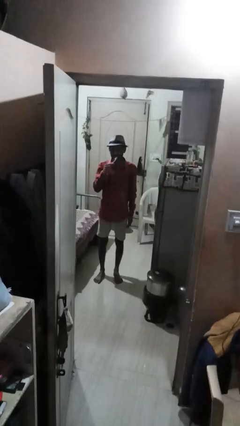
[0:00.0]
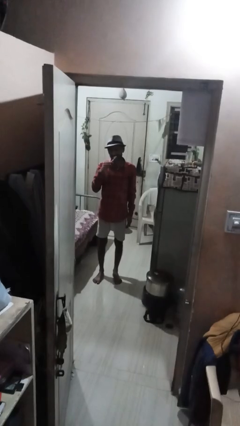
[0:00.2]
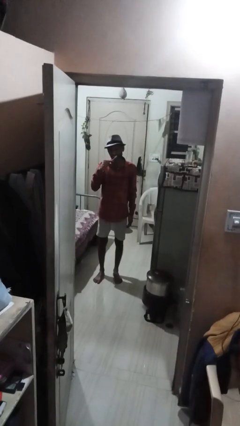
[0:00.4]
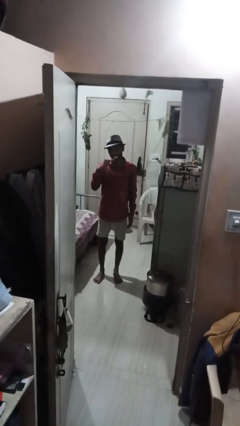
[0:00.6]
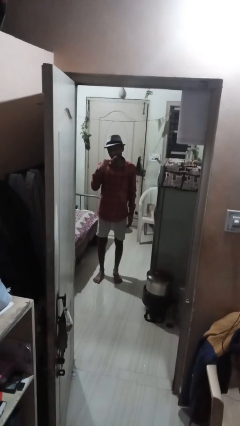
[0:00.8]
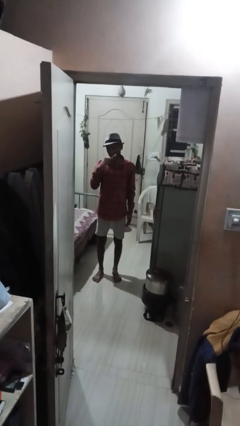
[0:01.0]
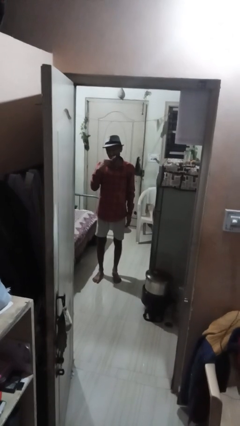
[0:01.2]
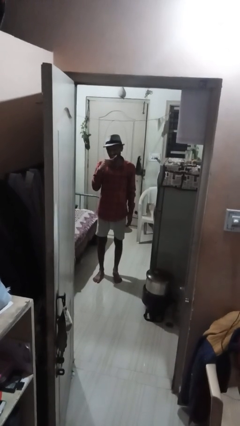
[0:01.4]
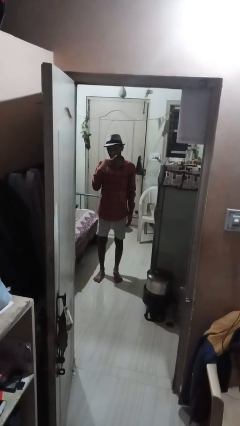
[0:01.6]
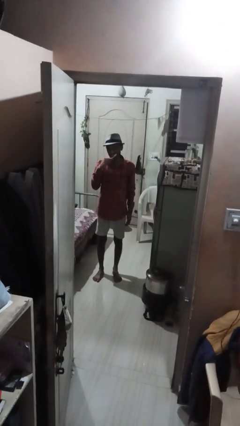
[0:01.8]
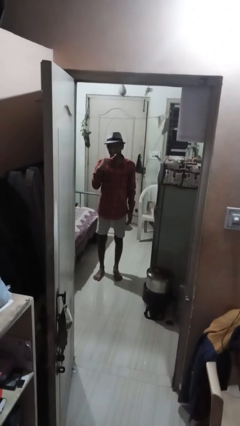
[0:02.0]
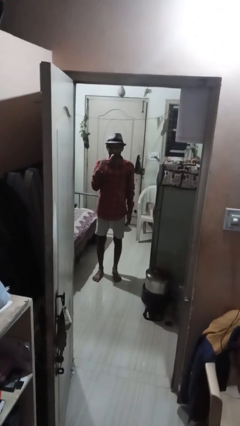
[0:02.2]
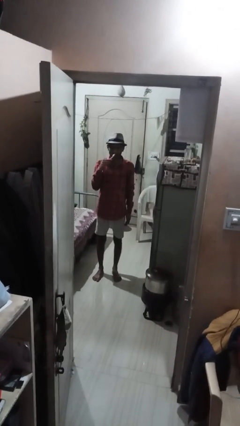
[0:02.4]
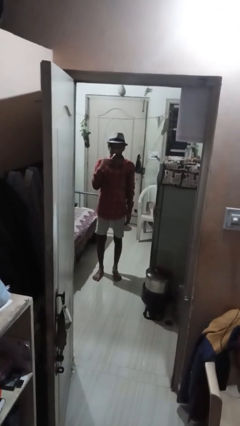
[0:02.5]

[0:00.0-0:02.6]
person brushes teeth

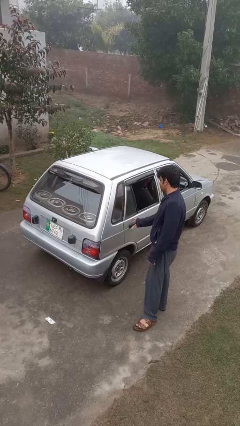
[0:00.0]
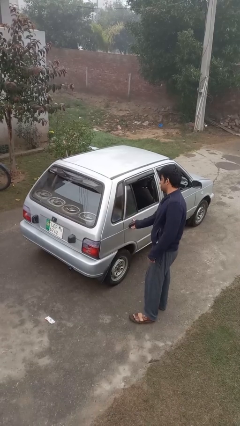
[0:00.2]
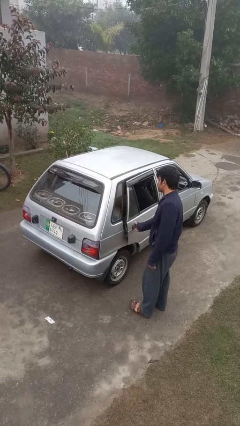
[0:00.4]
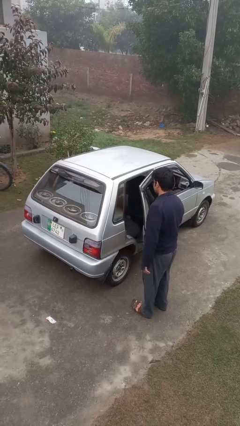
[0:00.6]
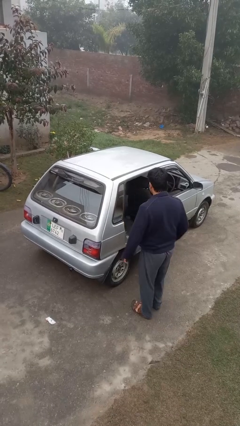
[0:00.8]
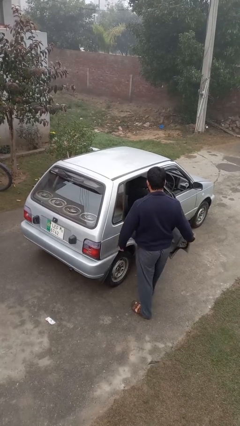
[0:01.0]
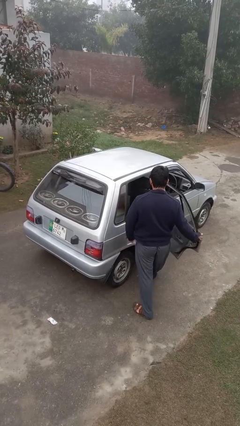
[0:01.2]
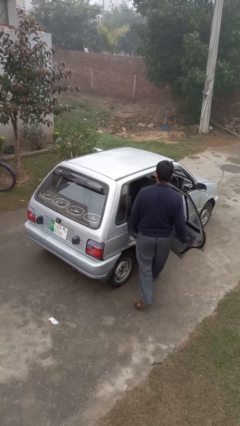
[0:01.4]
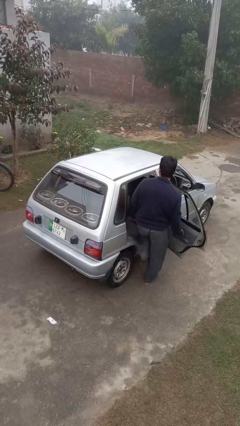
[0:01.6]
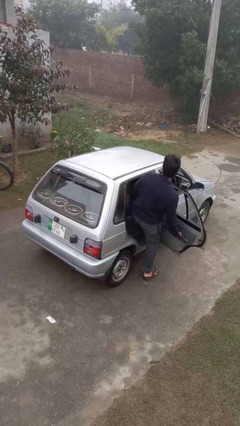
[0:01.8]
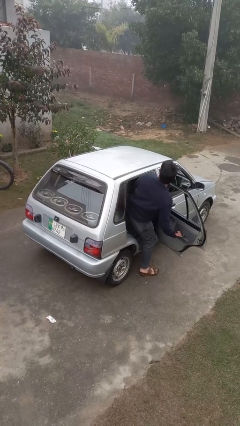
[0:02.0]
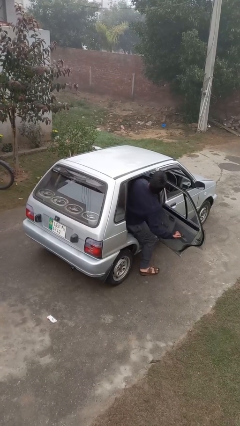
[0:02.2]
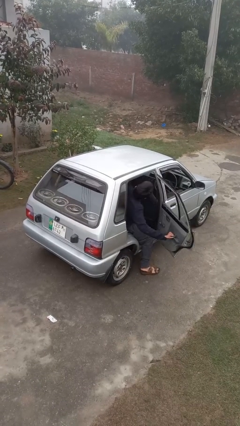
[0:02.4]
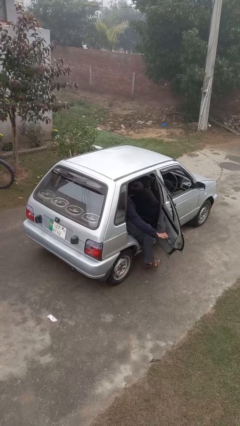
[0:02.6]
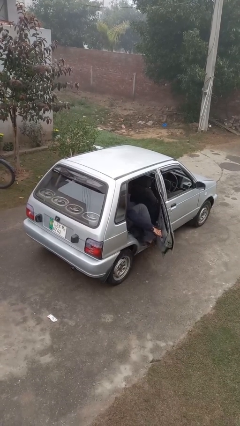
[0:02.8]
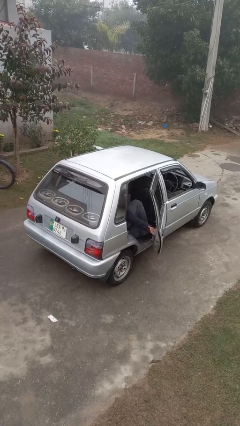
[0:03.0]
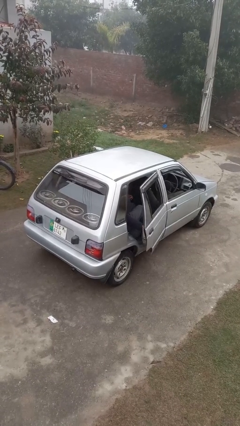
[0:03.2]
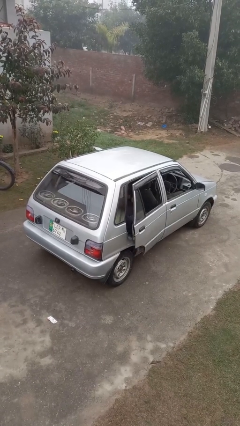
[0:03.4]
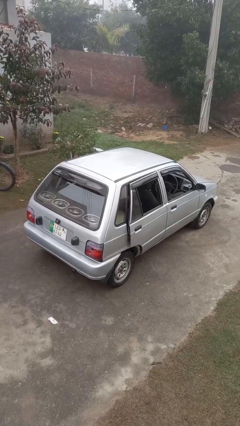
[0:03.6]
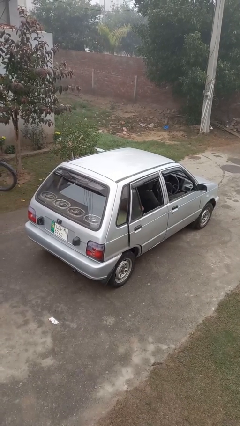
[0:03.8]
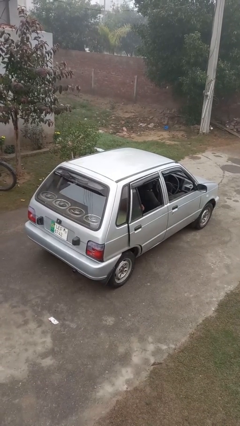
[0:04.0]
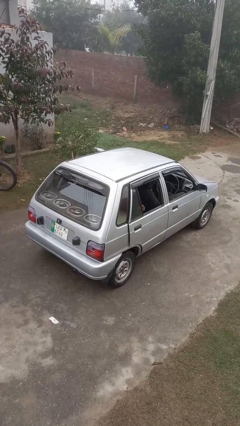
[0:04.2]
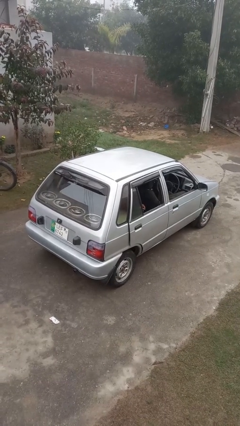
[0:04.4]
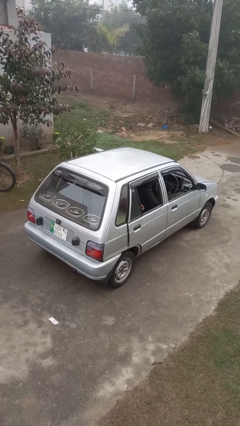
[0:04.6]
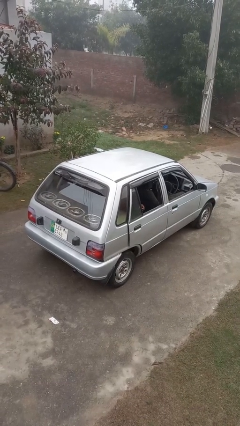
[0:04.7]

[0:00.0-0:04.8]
car picks up person

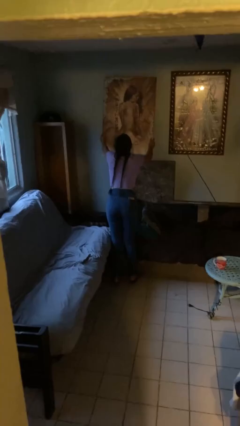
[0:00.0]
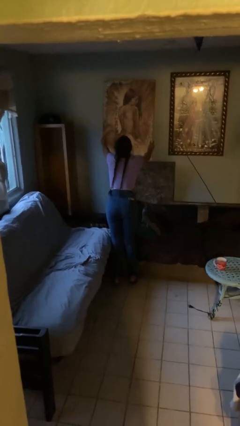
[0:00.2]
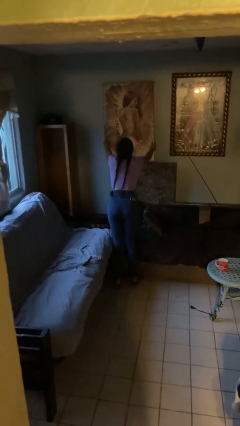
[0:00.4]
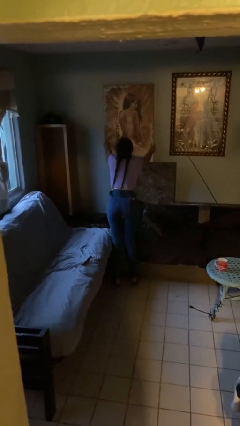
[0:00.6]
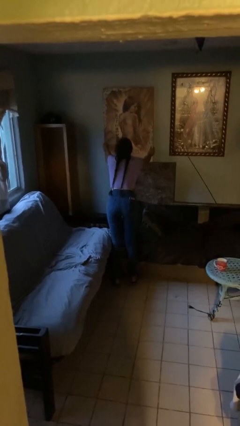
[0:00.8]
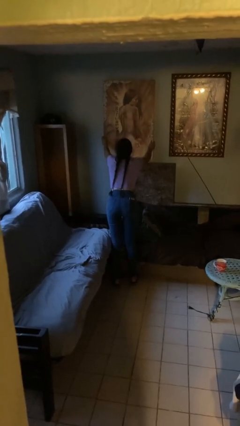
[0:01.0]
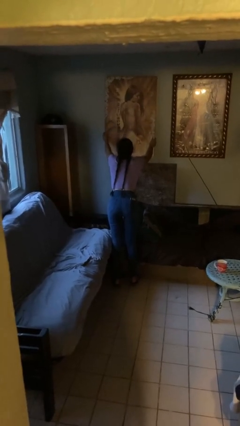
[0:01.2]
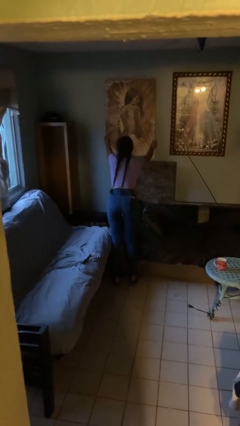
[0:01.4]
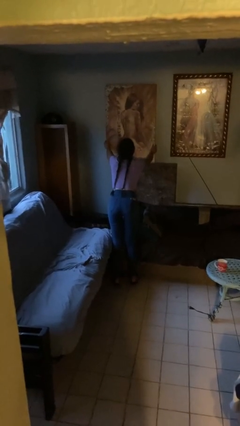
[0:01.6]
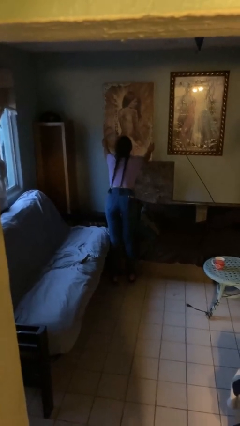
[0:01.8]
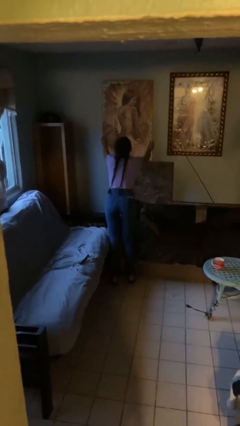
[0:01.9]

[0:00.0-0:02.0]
person puts up picture frame

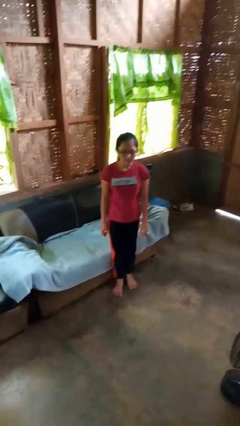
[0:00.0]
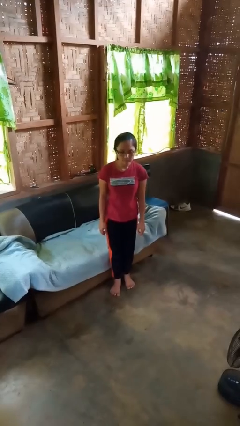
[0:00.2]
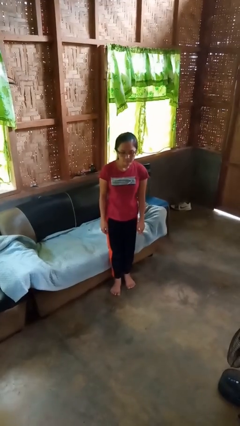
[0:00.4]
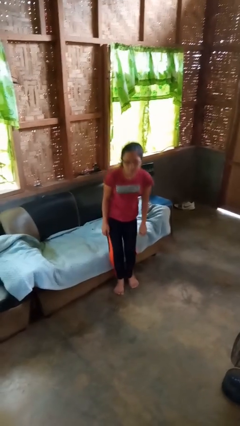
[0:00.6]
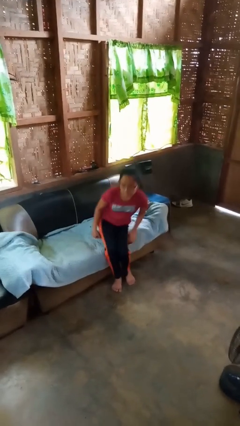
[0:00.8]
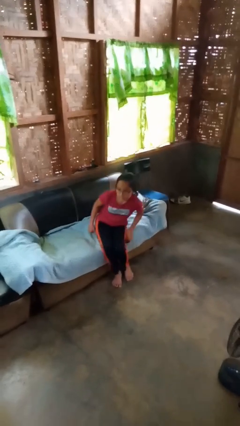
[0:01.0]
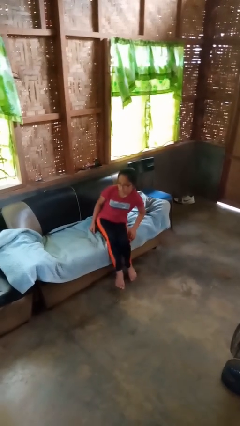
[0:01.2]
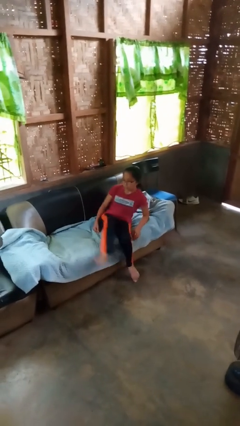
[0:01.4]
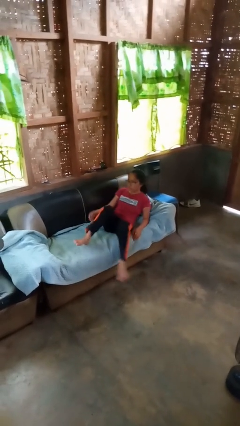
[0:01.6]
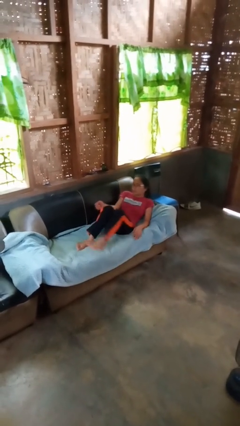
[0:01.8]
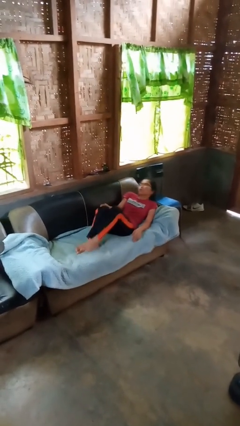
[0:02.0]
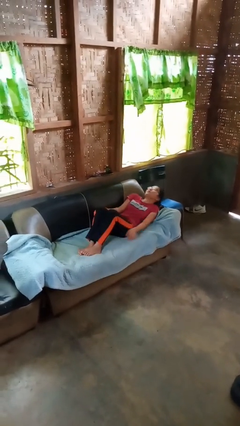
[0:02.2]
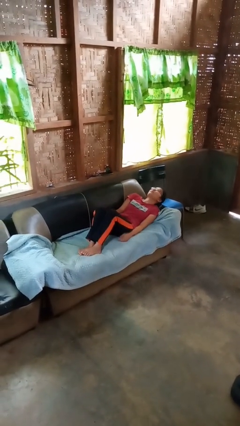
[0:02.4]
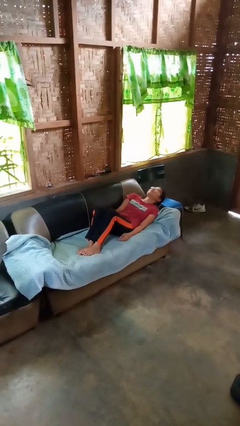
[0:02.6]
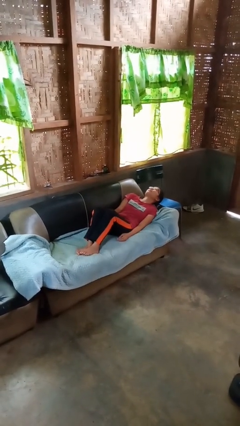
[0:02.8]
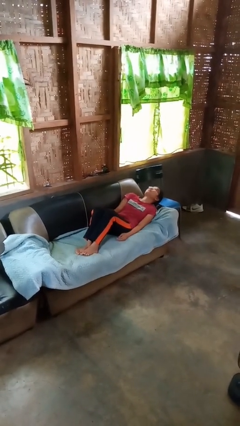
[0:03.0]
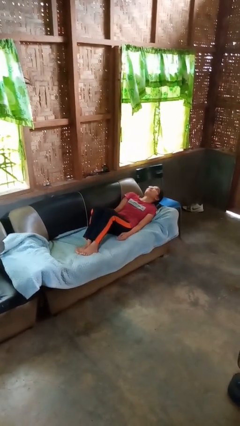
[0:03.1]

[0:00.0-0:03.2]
person lies down on couch

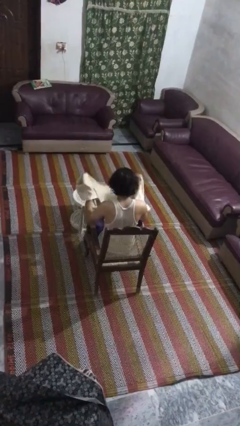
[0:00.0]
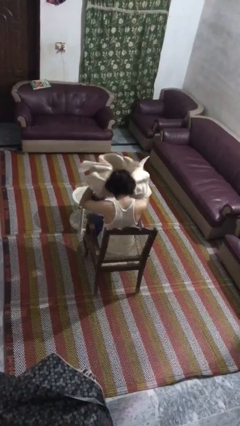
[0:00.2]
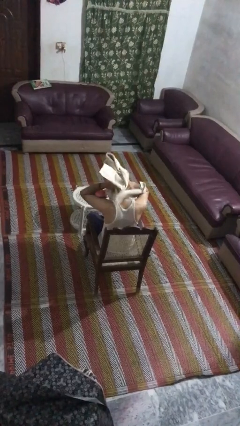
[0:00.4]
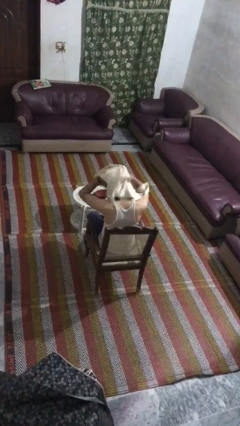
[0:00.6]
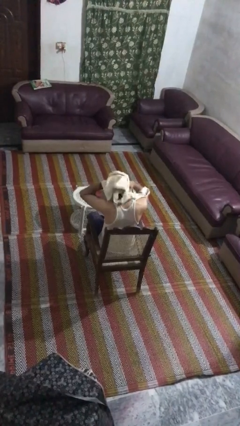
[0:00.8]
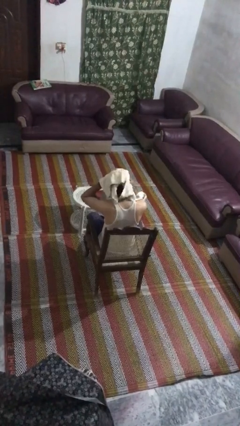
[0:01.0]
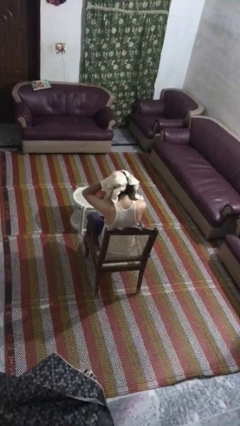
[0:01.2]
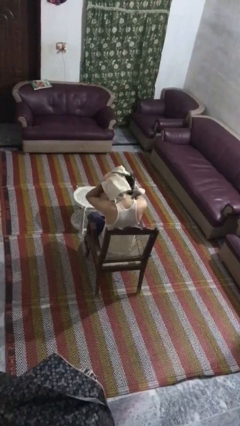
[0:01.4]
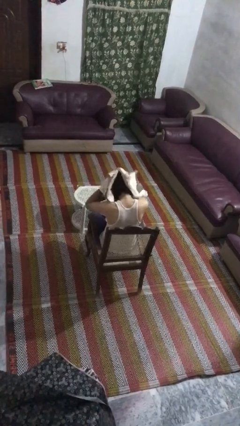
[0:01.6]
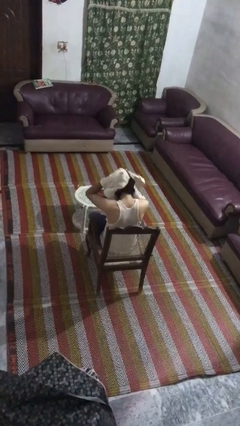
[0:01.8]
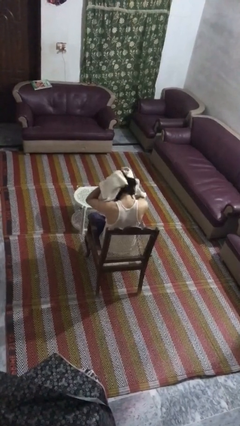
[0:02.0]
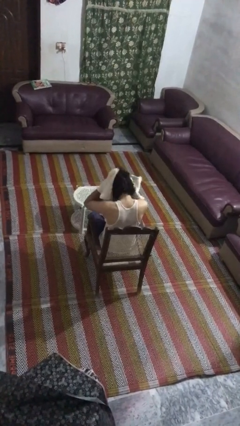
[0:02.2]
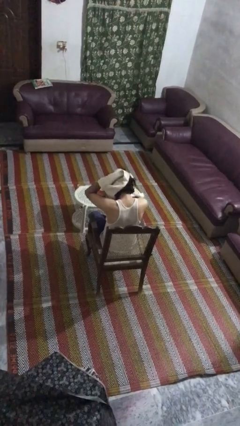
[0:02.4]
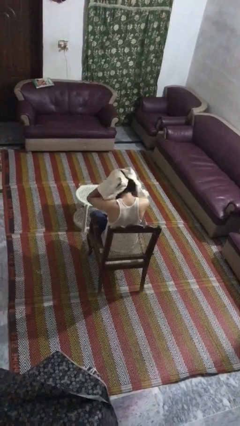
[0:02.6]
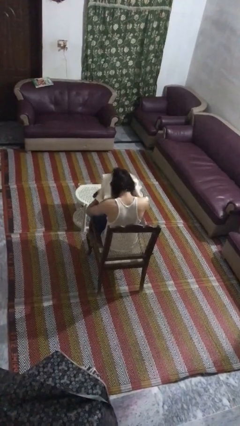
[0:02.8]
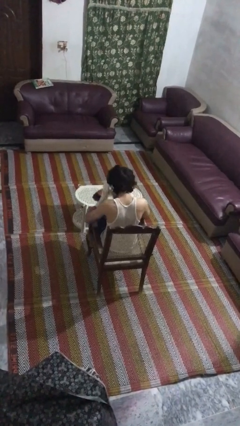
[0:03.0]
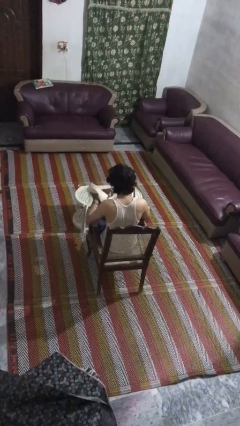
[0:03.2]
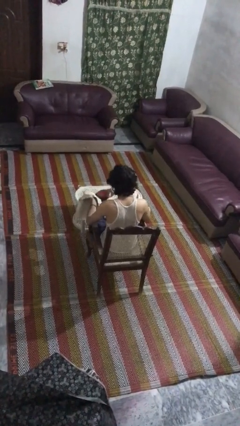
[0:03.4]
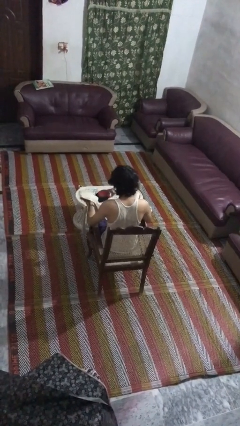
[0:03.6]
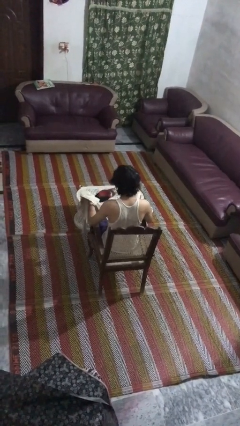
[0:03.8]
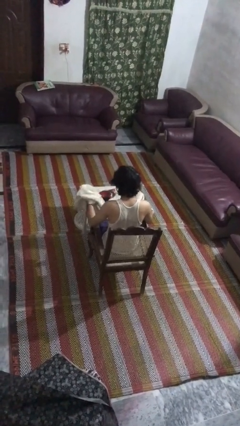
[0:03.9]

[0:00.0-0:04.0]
person dries hair with towel

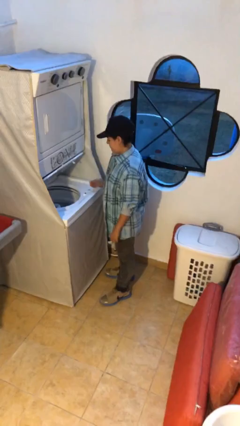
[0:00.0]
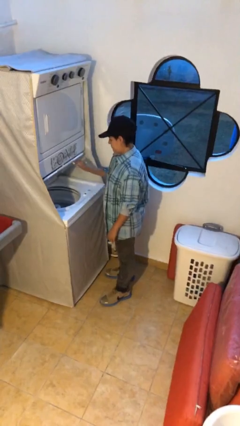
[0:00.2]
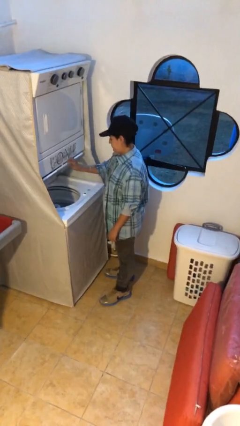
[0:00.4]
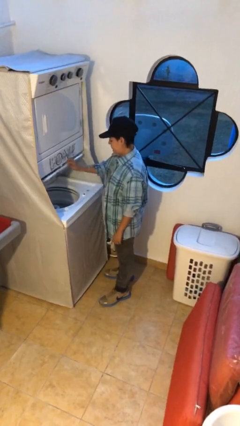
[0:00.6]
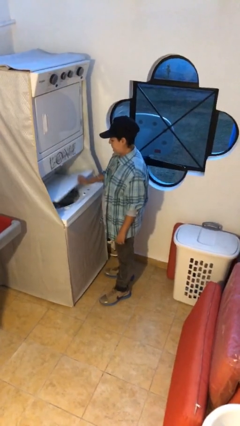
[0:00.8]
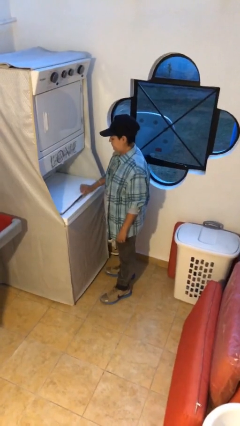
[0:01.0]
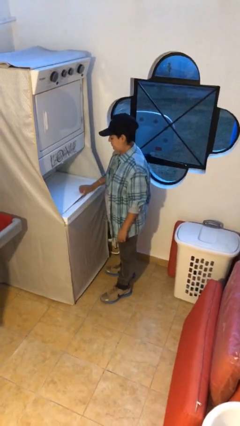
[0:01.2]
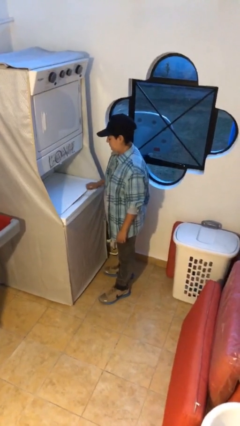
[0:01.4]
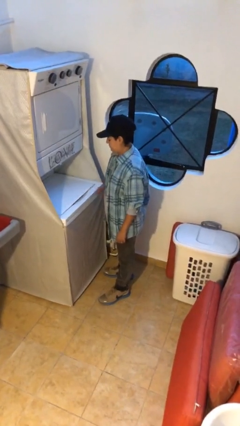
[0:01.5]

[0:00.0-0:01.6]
person closes clothes washer
